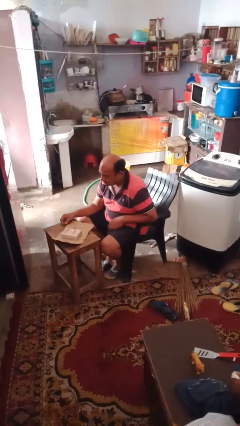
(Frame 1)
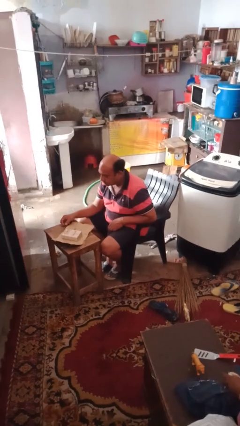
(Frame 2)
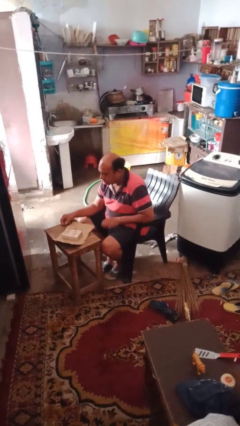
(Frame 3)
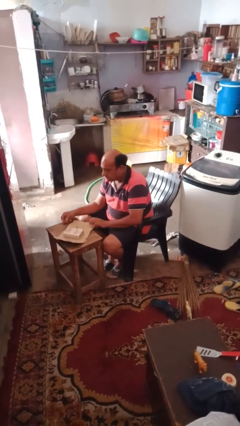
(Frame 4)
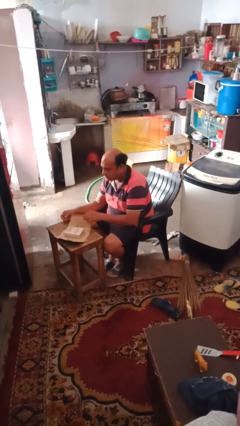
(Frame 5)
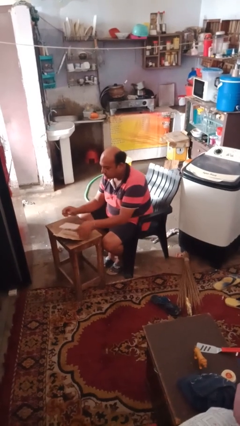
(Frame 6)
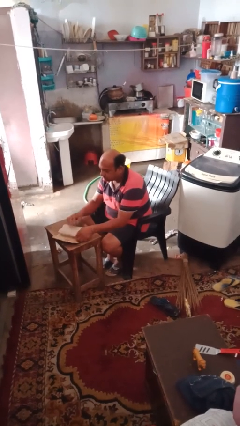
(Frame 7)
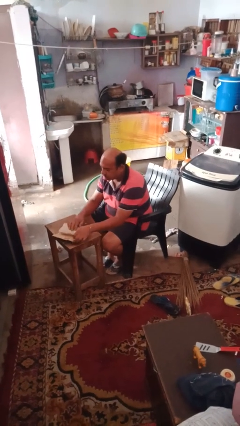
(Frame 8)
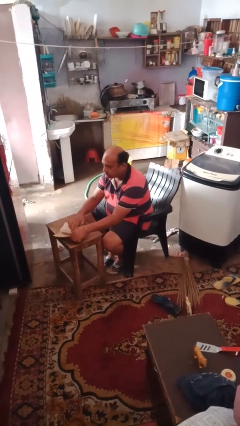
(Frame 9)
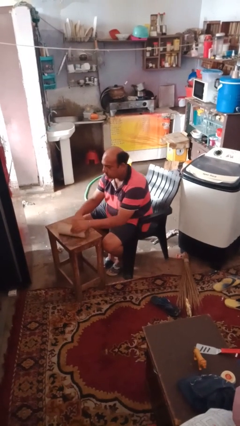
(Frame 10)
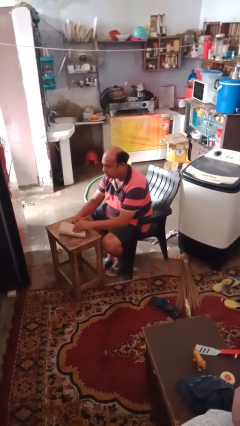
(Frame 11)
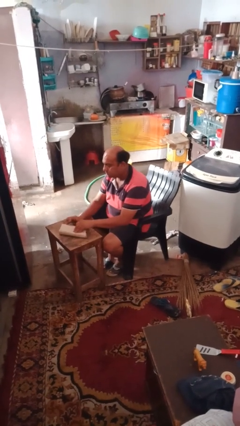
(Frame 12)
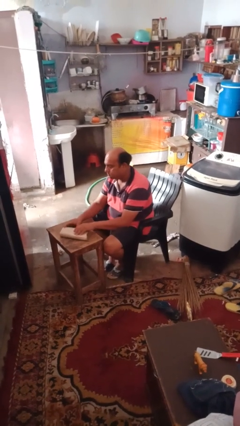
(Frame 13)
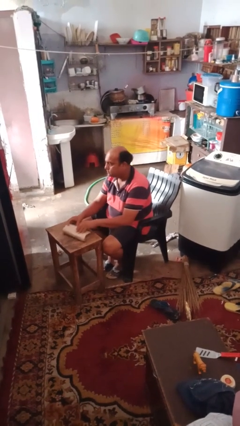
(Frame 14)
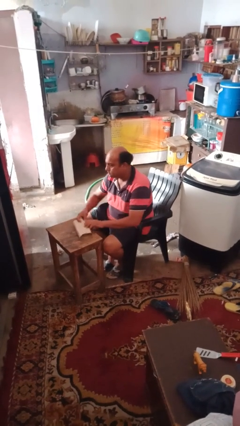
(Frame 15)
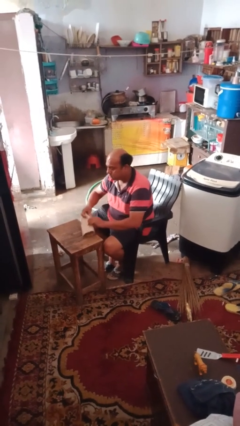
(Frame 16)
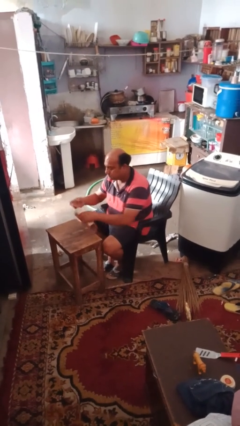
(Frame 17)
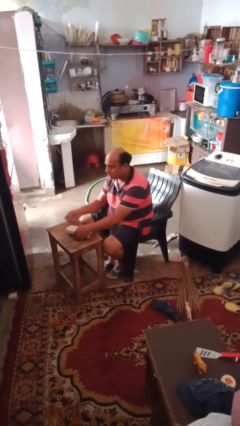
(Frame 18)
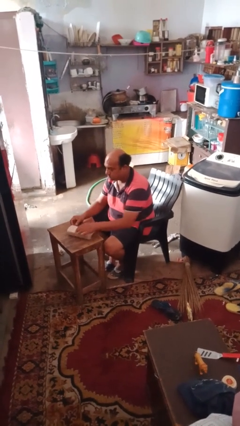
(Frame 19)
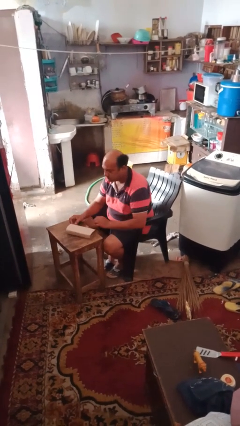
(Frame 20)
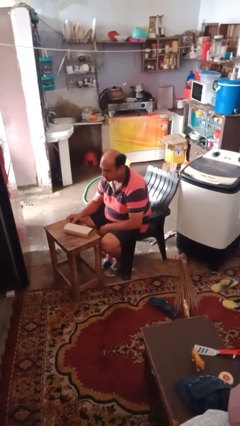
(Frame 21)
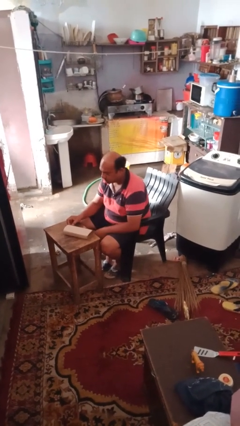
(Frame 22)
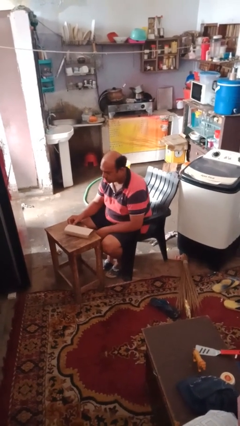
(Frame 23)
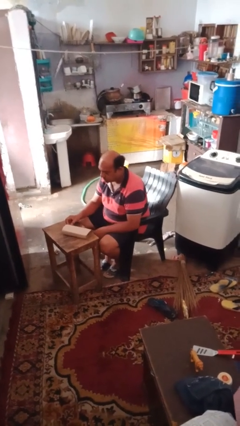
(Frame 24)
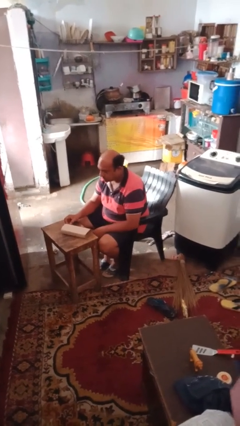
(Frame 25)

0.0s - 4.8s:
person wraps box

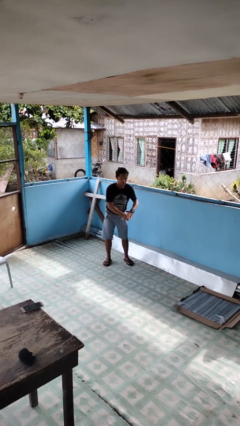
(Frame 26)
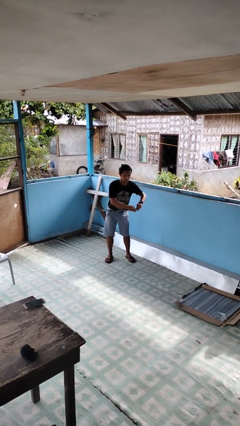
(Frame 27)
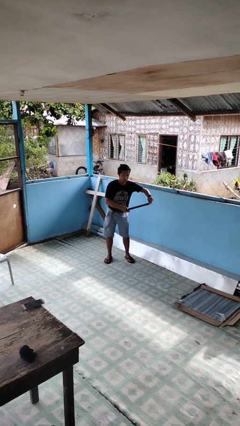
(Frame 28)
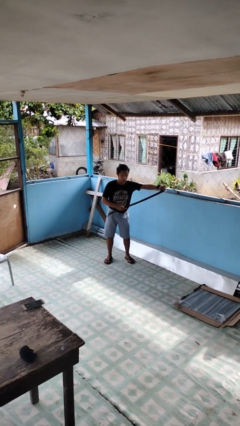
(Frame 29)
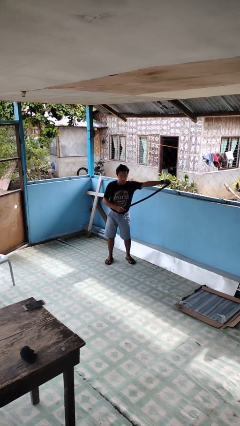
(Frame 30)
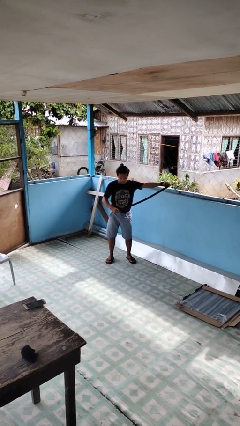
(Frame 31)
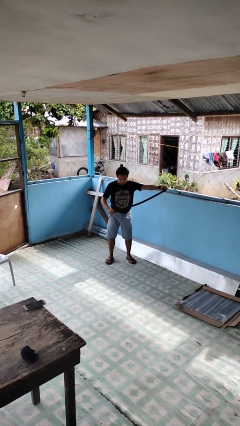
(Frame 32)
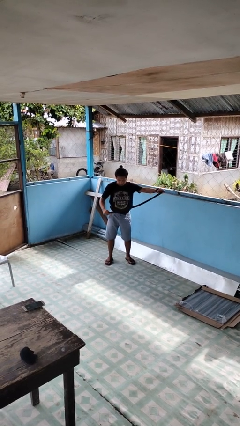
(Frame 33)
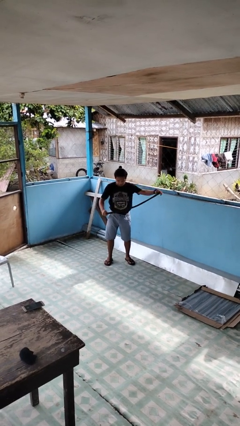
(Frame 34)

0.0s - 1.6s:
person takes off belt

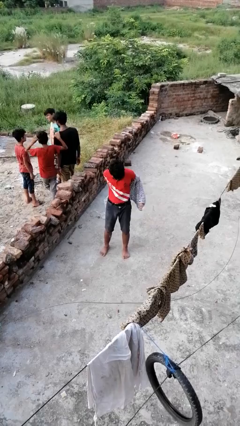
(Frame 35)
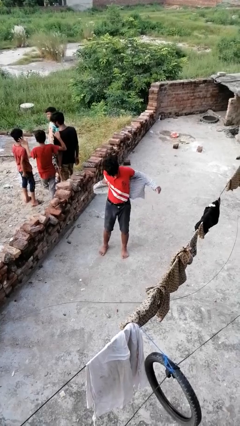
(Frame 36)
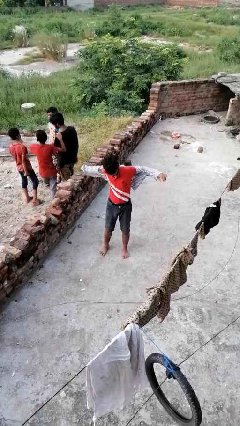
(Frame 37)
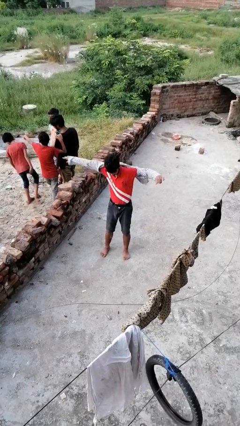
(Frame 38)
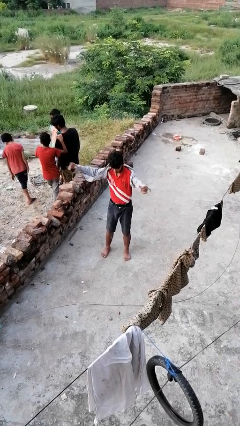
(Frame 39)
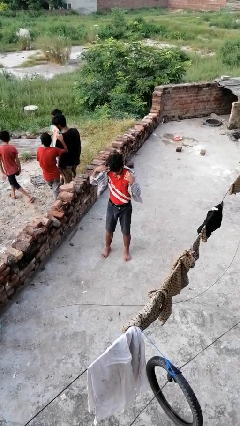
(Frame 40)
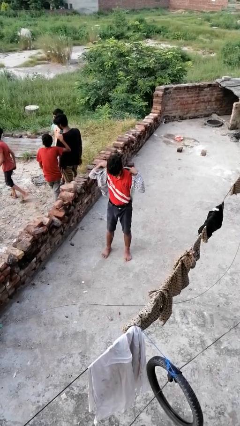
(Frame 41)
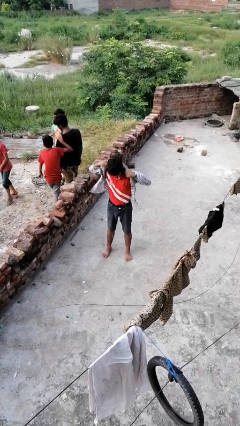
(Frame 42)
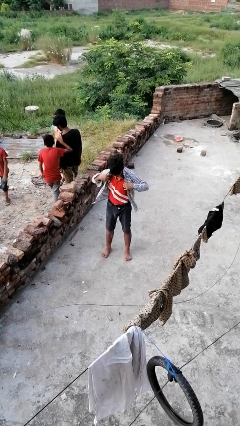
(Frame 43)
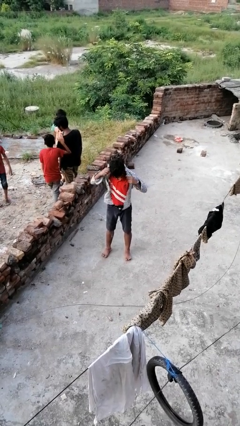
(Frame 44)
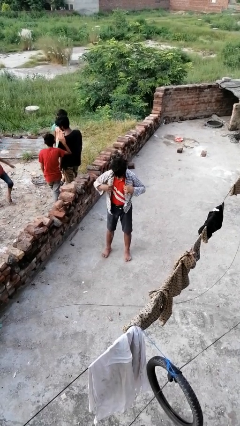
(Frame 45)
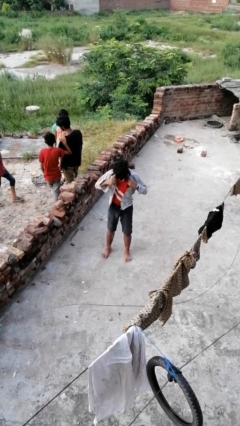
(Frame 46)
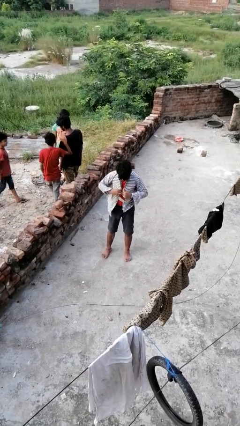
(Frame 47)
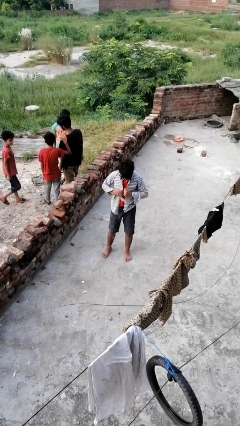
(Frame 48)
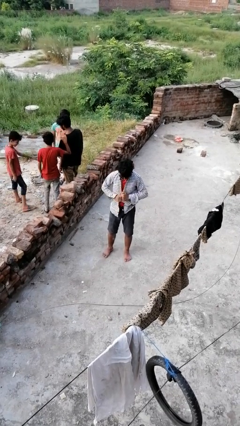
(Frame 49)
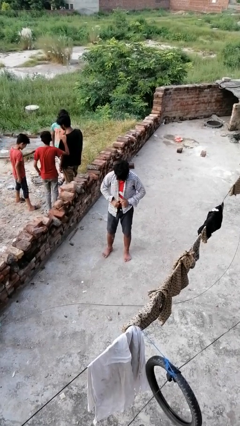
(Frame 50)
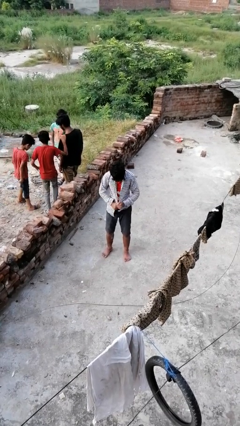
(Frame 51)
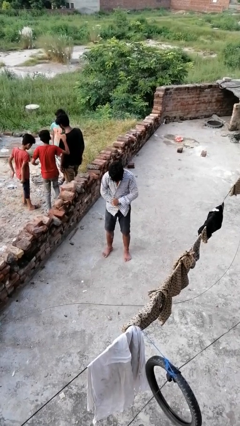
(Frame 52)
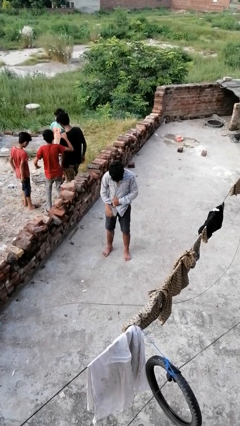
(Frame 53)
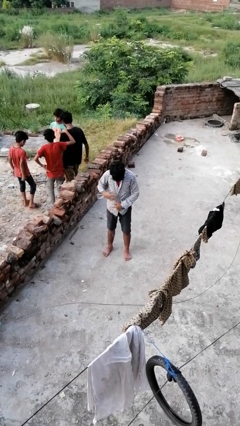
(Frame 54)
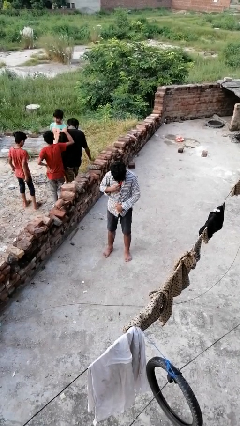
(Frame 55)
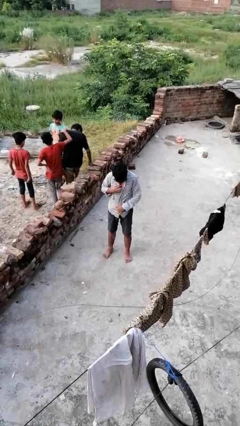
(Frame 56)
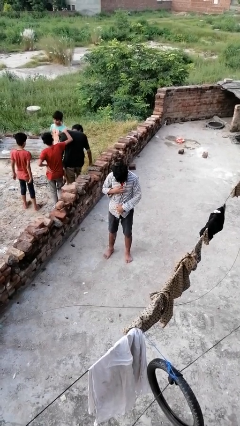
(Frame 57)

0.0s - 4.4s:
person puts on shirt

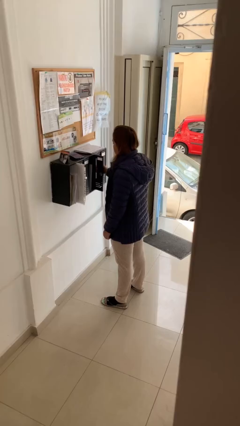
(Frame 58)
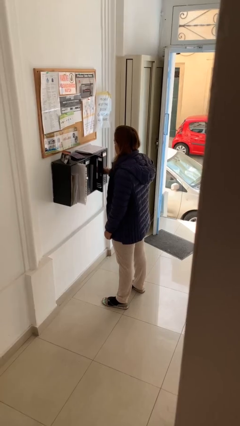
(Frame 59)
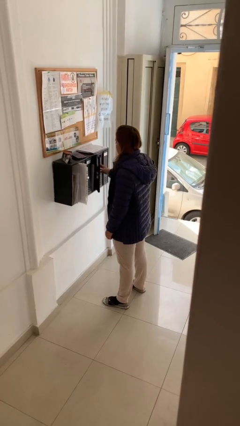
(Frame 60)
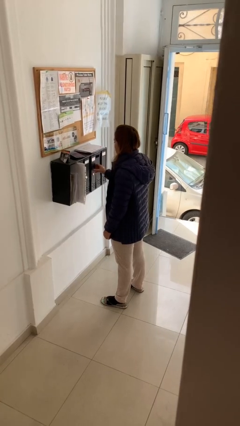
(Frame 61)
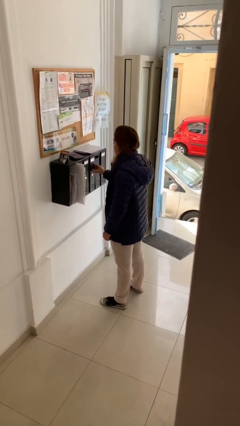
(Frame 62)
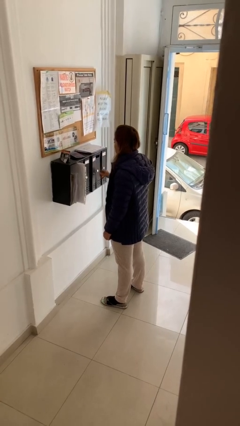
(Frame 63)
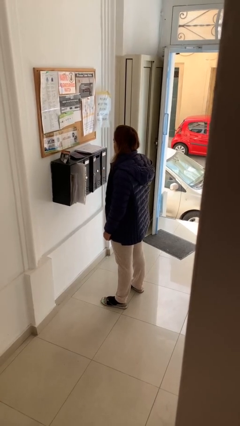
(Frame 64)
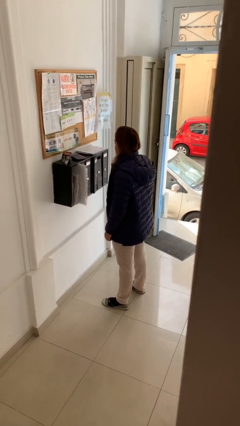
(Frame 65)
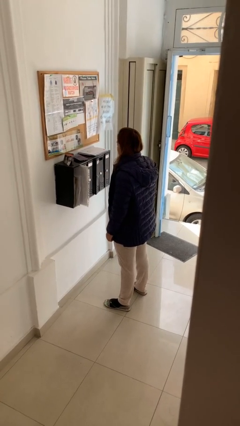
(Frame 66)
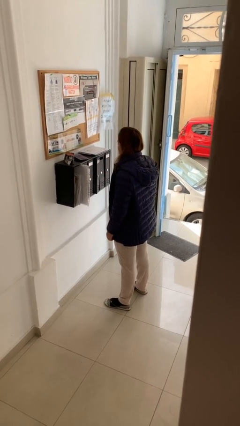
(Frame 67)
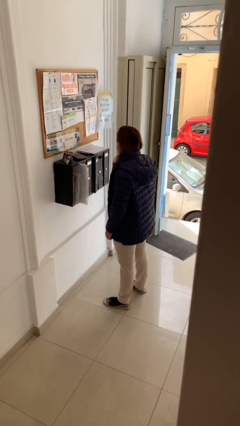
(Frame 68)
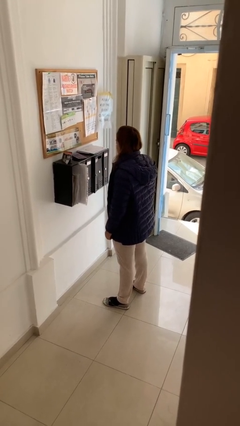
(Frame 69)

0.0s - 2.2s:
person closes mailbox

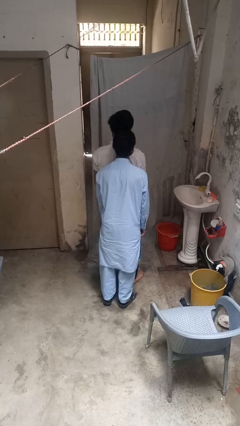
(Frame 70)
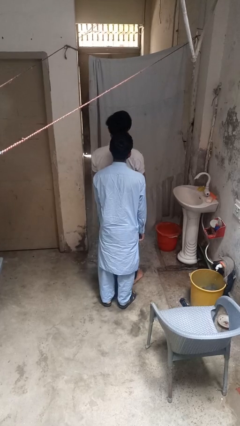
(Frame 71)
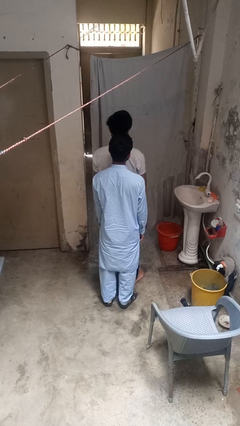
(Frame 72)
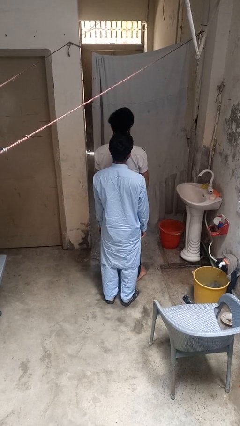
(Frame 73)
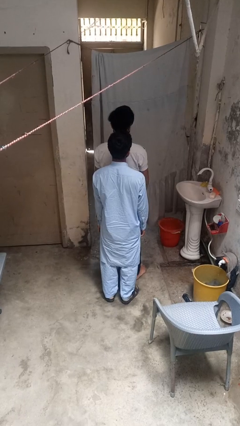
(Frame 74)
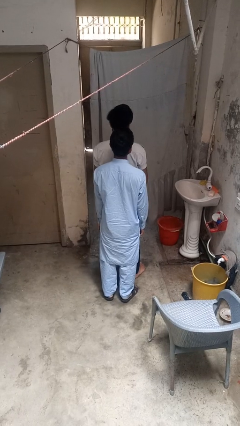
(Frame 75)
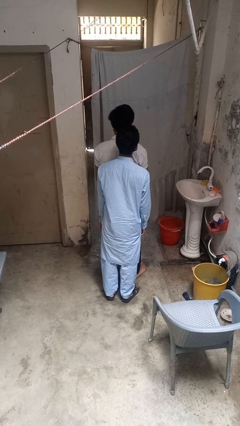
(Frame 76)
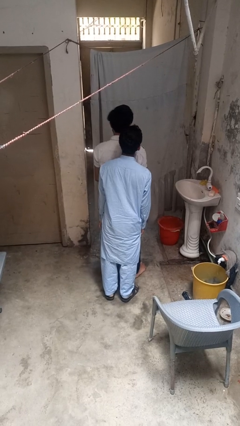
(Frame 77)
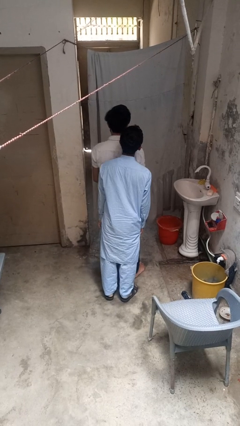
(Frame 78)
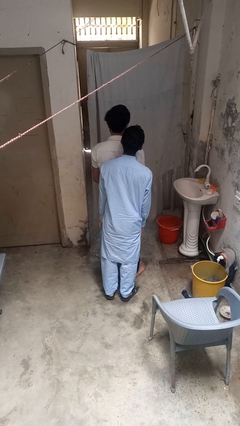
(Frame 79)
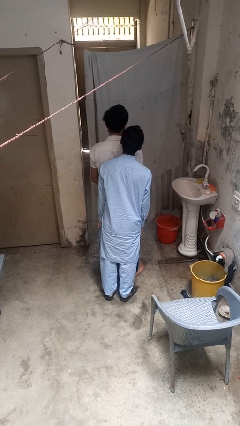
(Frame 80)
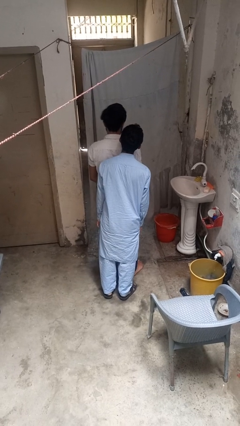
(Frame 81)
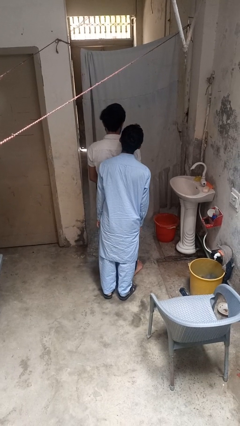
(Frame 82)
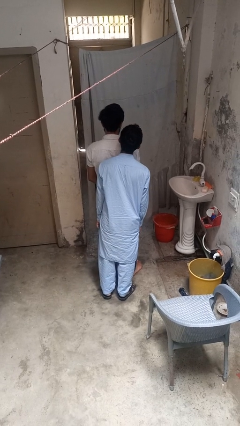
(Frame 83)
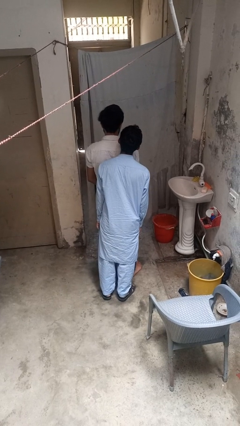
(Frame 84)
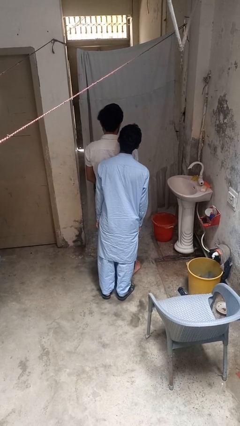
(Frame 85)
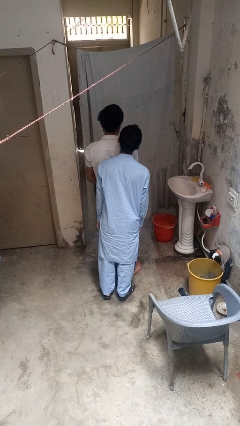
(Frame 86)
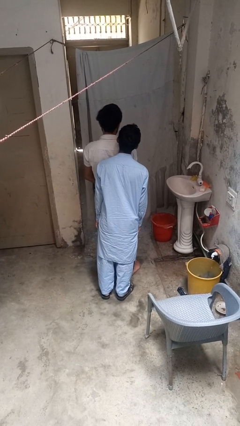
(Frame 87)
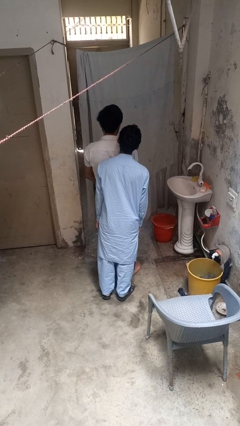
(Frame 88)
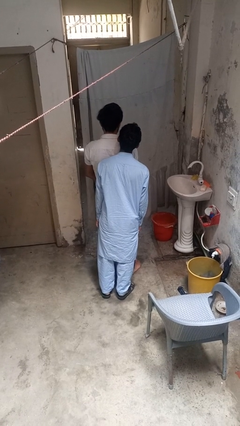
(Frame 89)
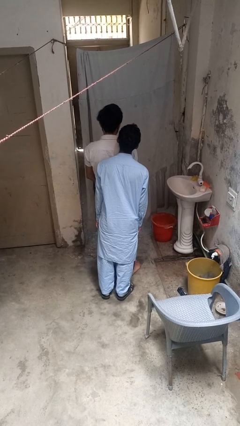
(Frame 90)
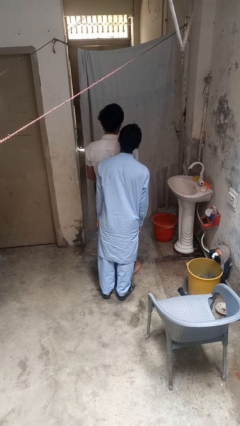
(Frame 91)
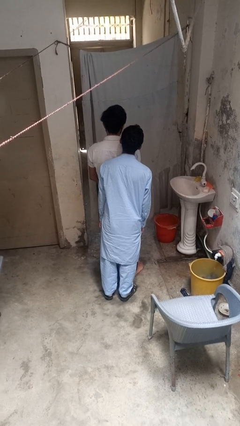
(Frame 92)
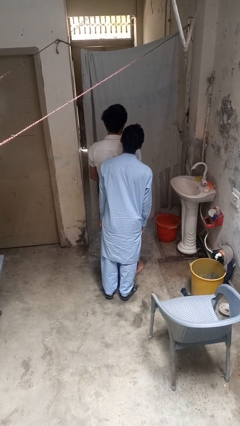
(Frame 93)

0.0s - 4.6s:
person looks over shoulder
